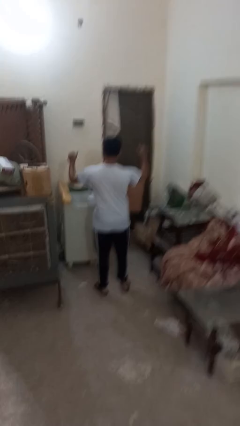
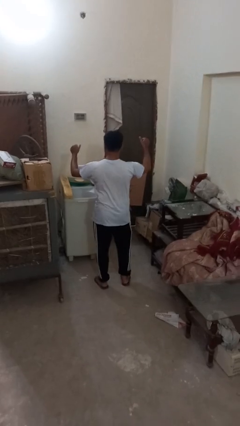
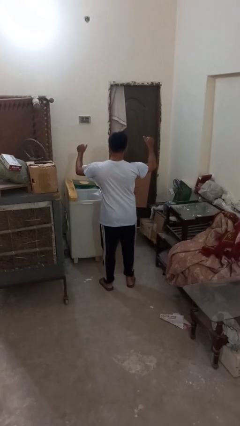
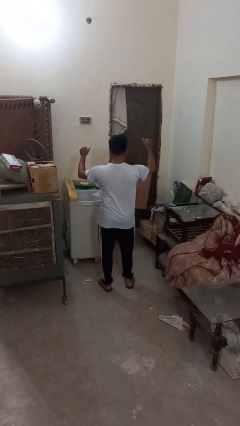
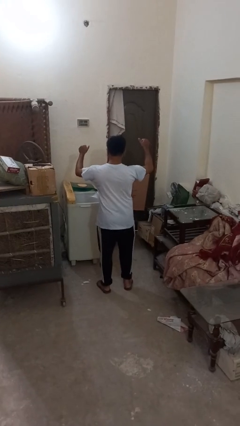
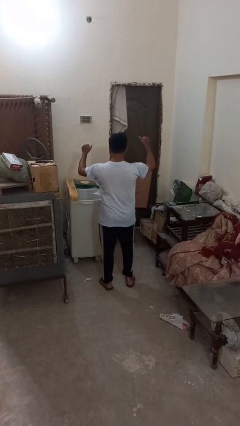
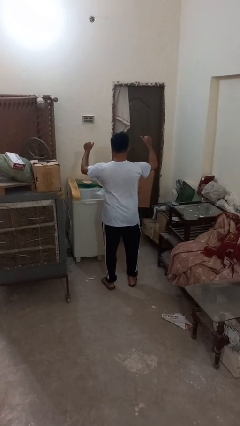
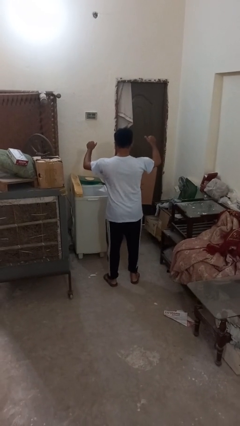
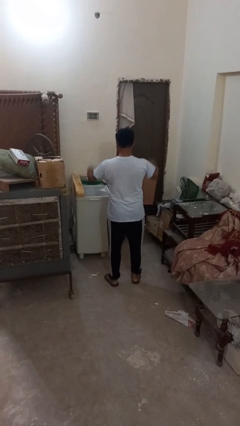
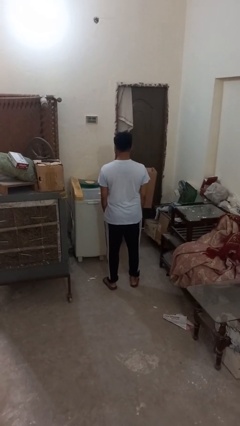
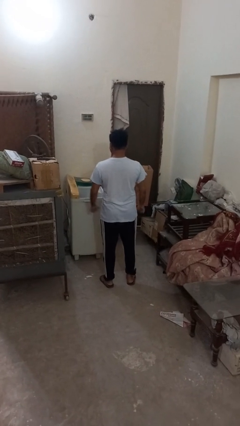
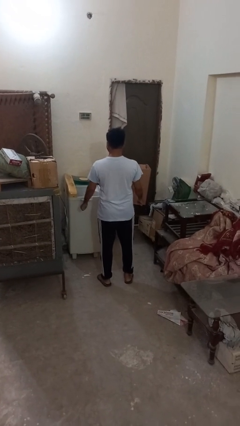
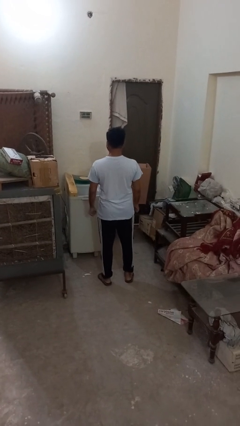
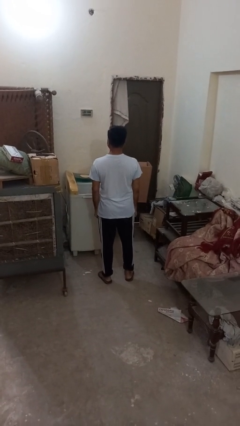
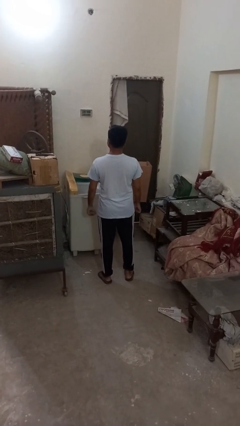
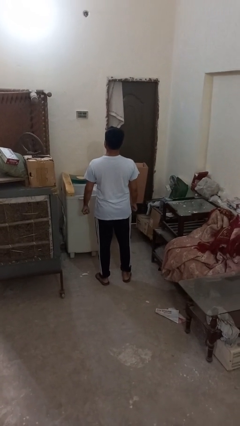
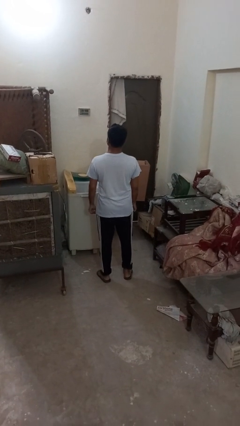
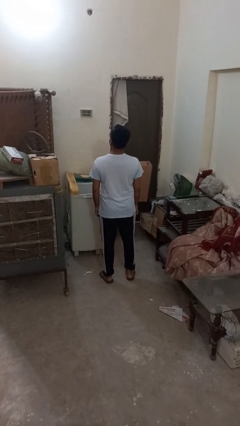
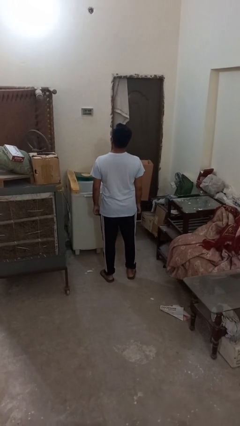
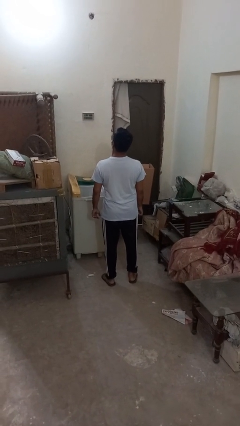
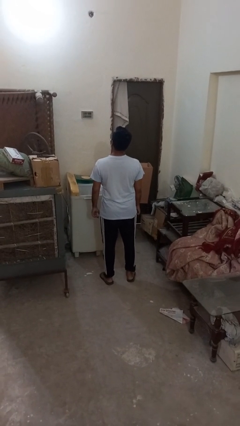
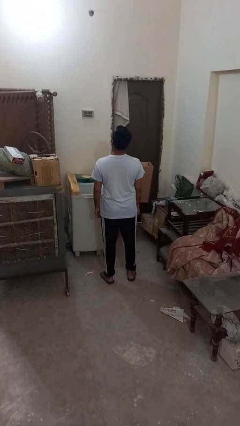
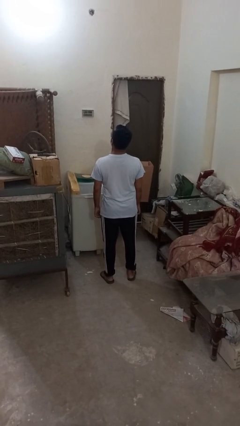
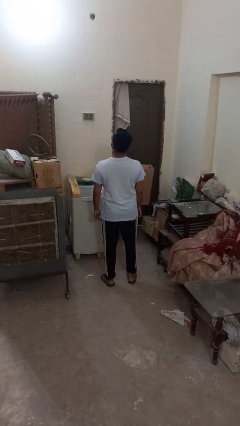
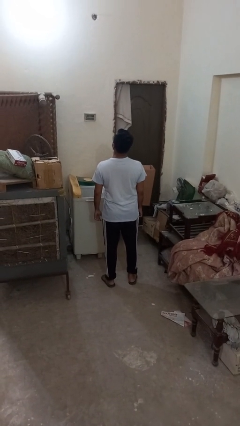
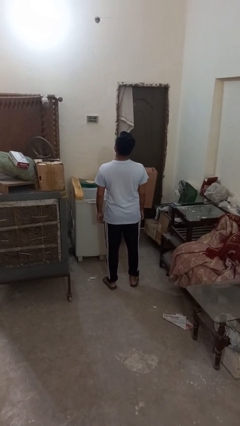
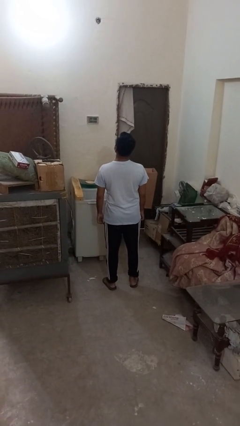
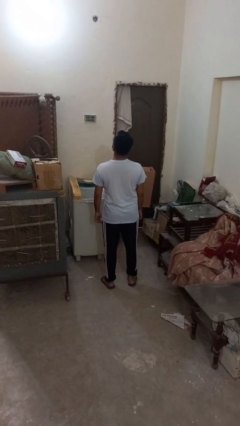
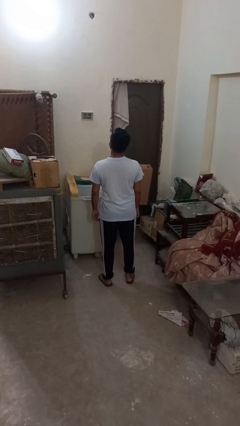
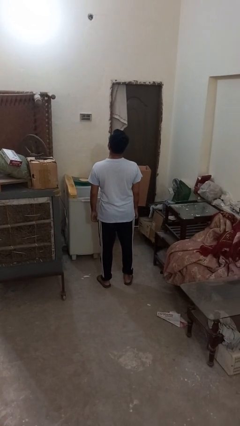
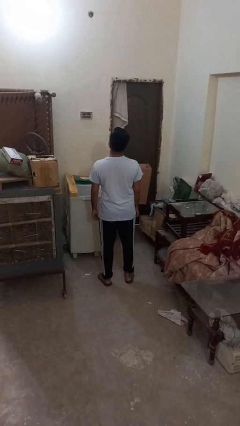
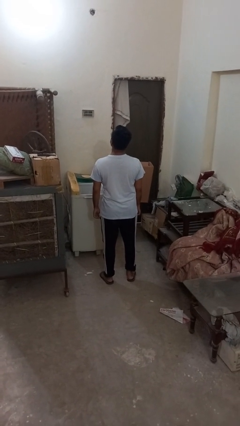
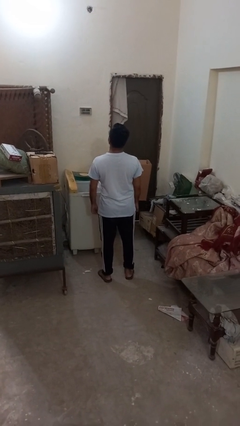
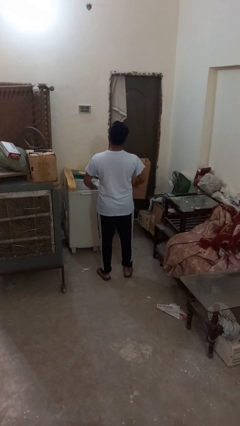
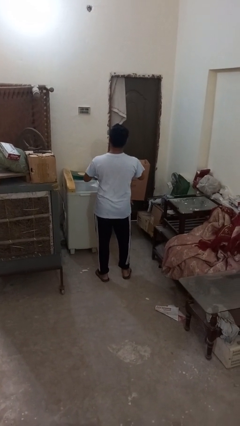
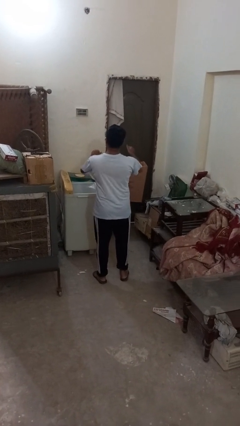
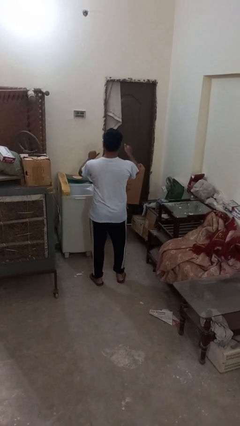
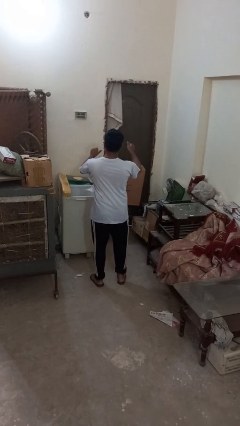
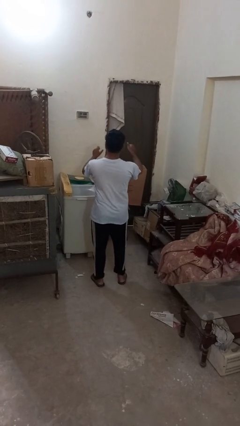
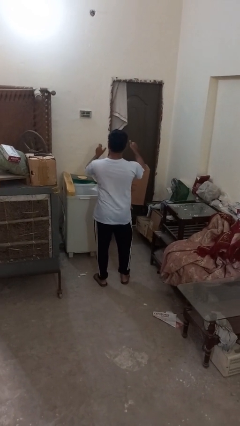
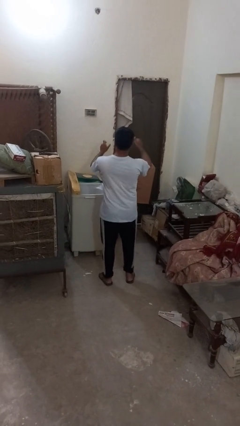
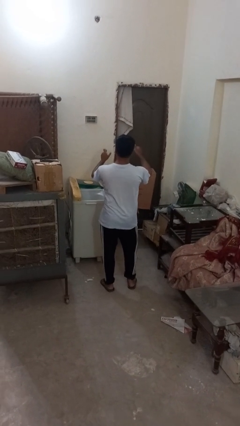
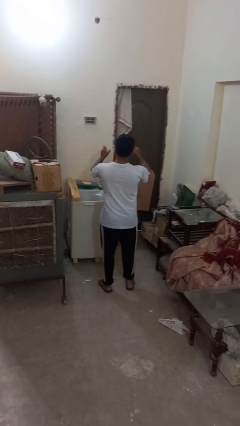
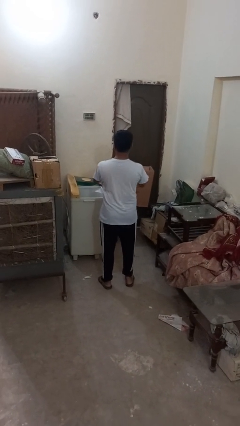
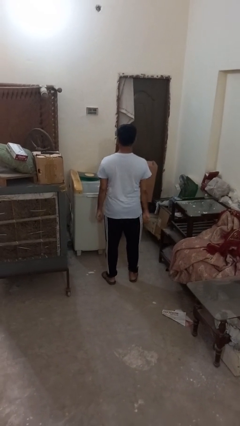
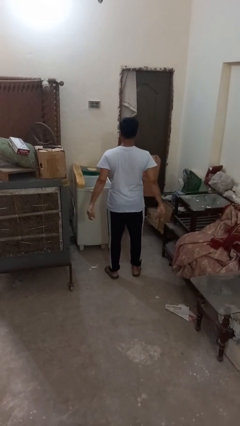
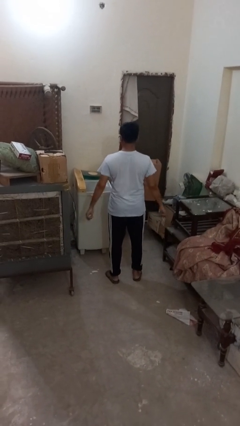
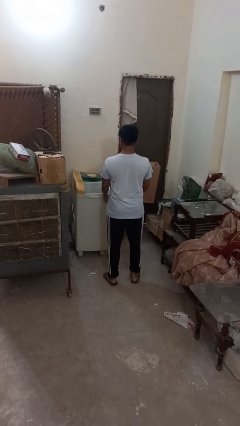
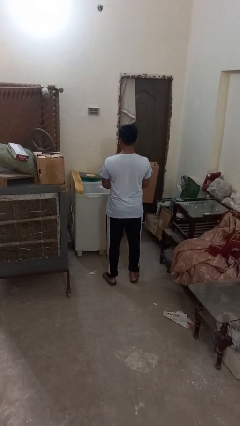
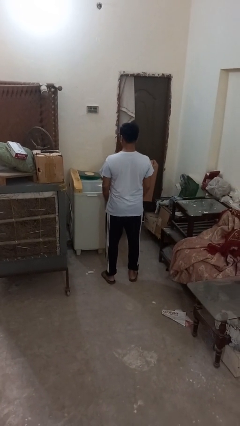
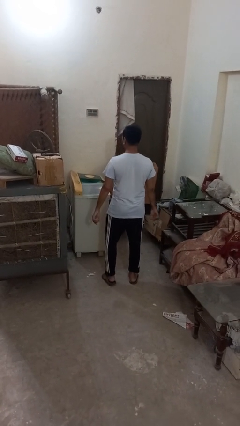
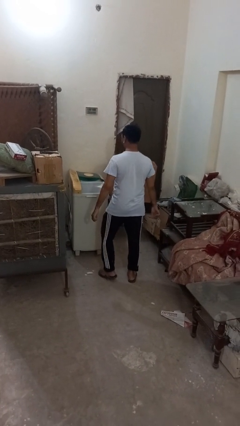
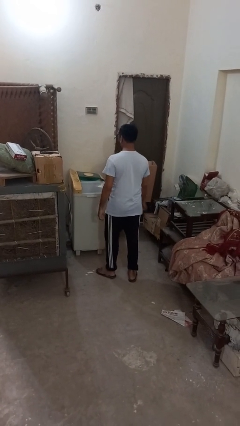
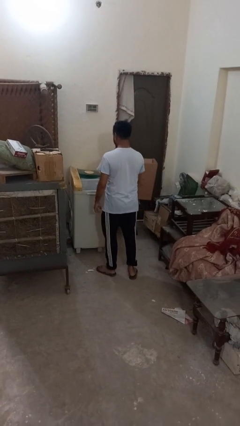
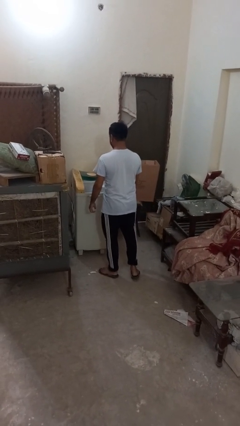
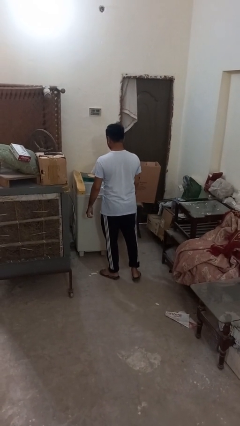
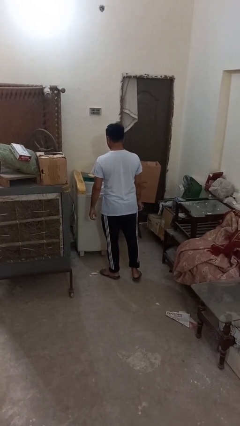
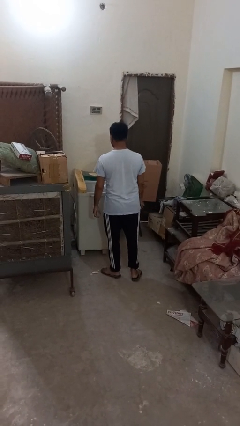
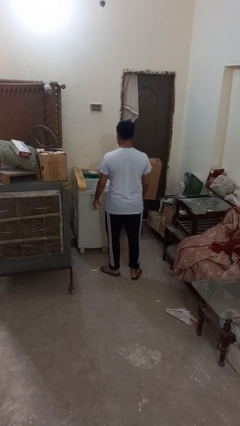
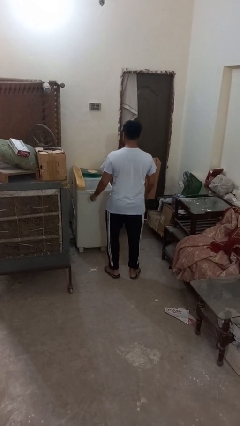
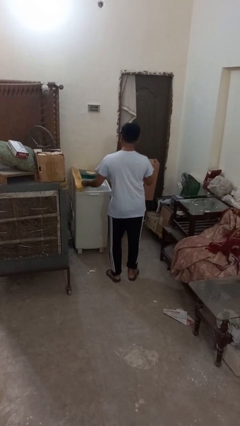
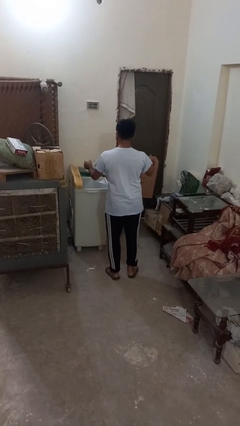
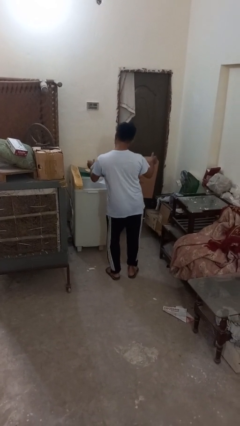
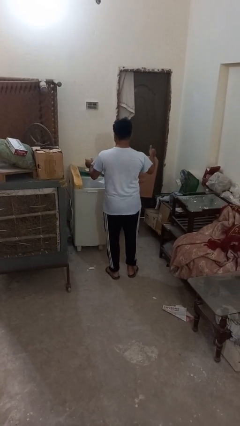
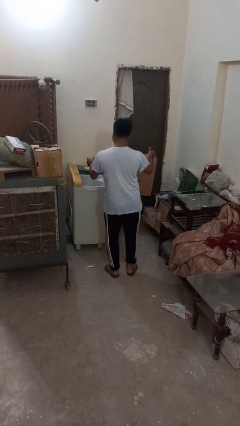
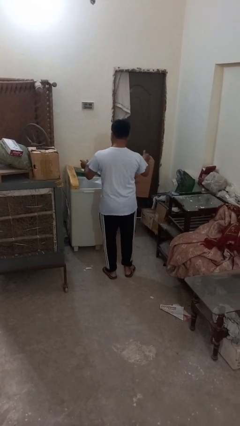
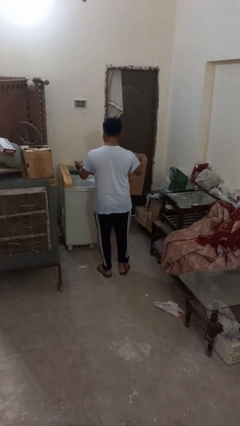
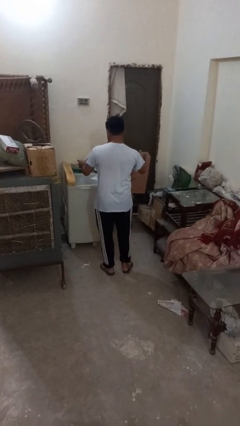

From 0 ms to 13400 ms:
person wiggles hips

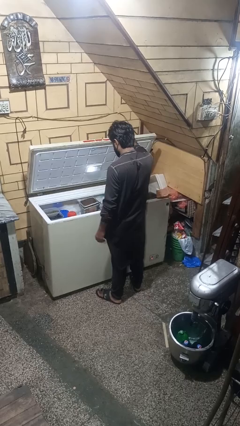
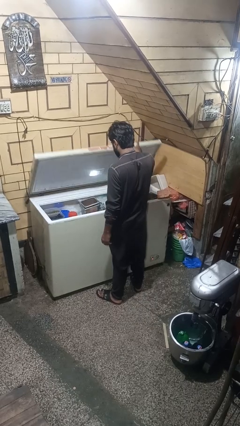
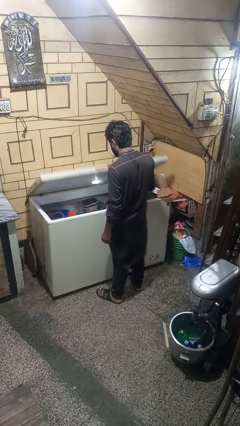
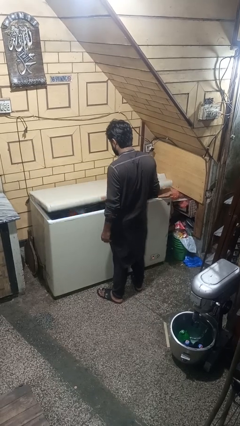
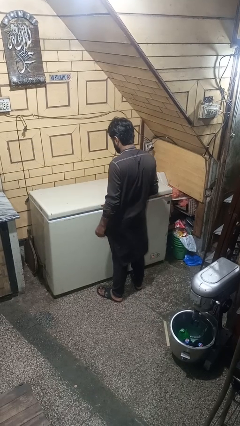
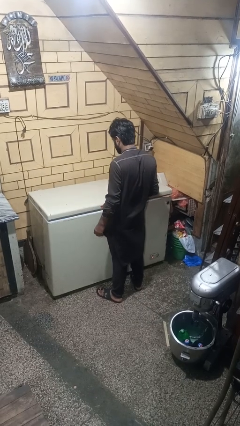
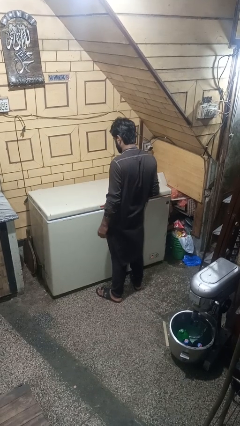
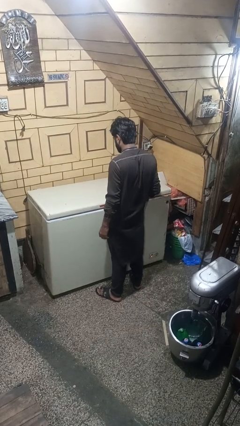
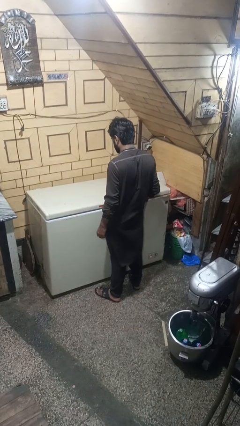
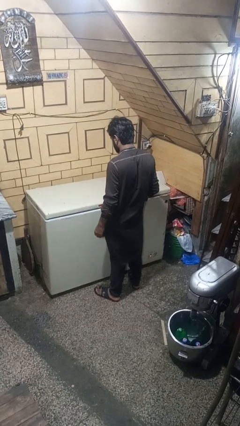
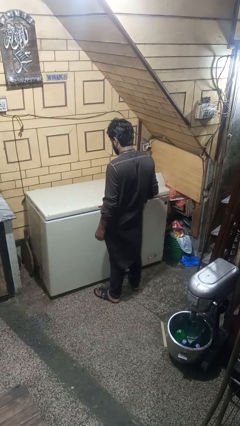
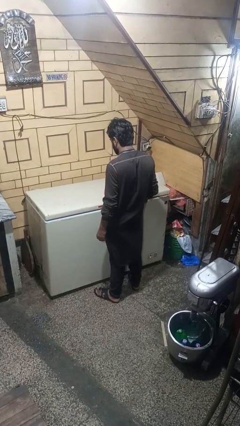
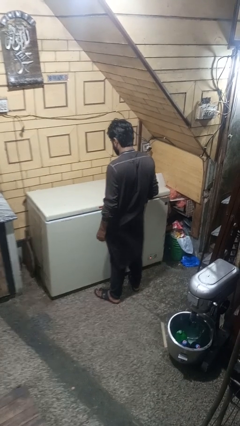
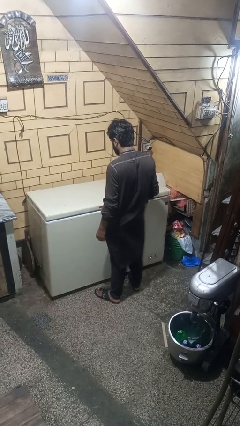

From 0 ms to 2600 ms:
person closes refrigerator

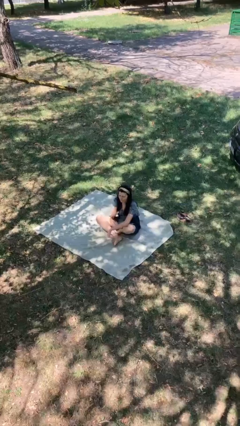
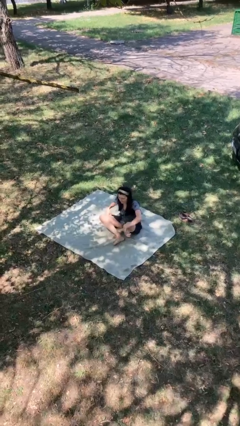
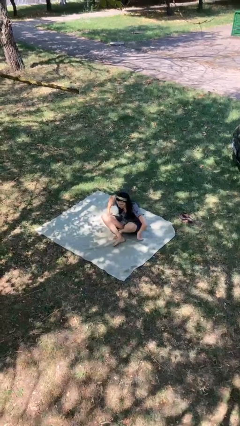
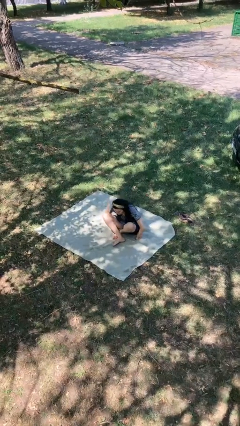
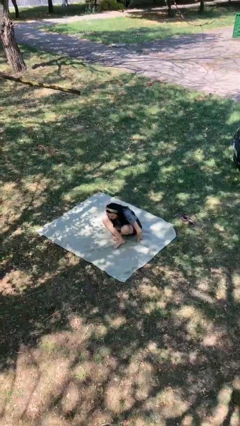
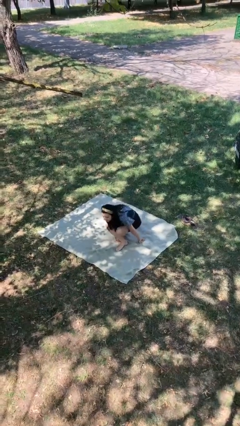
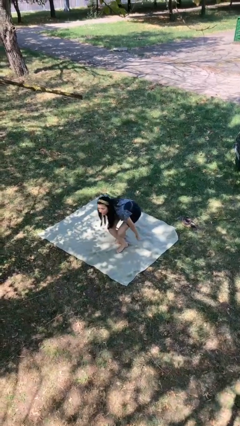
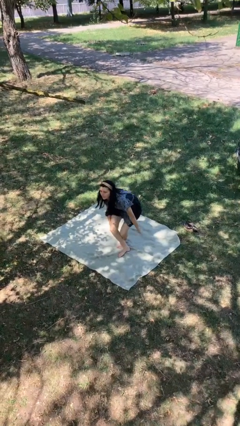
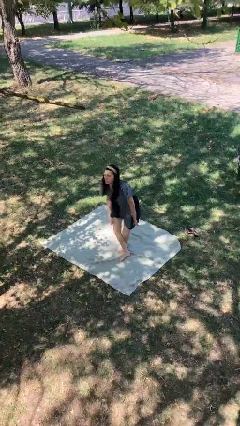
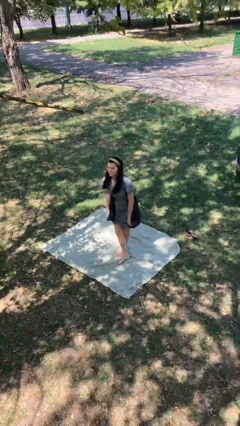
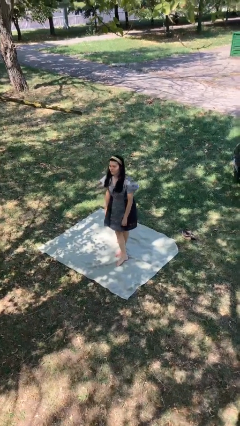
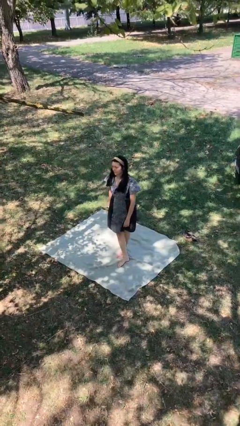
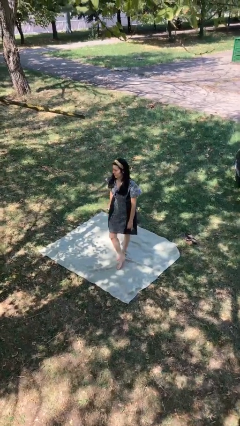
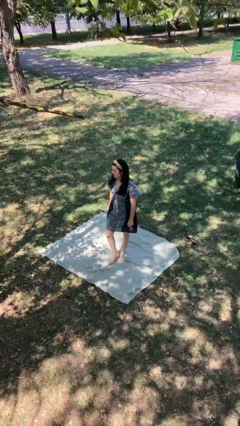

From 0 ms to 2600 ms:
person stands up from floor
